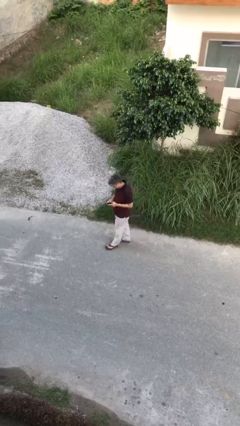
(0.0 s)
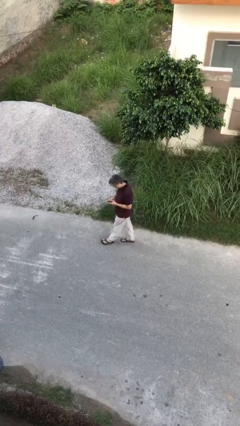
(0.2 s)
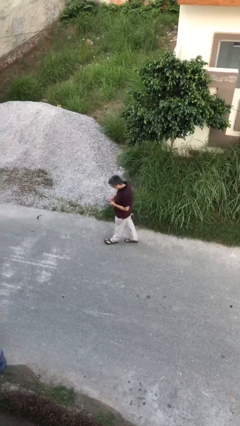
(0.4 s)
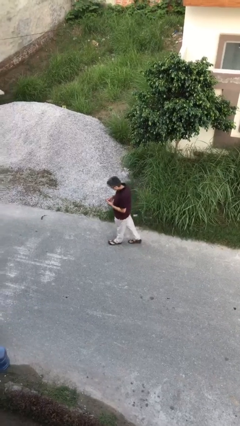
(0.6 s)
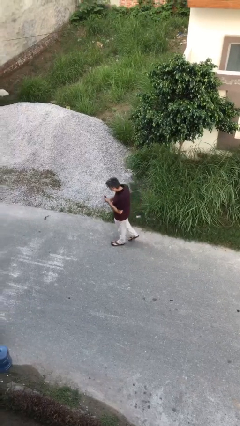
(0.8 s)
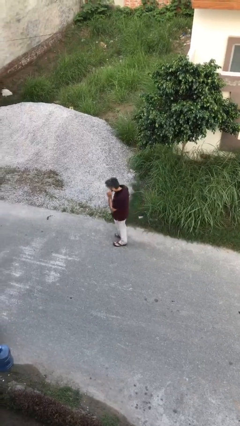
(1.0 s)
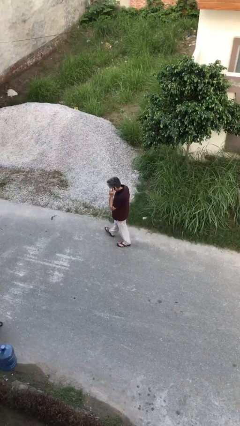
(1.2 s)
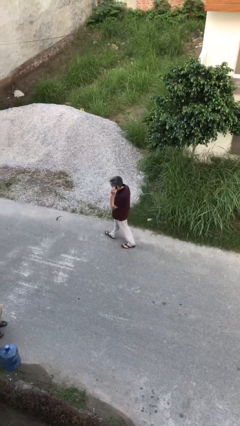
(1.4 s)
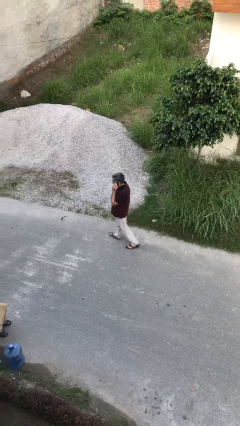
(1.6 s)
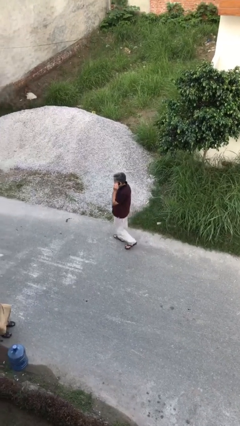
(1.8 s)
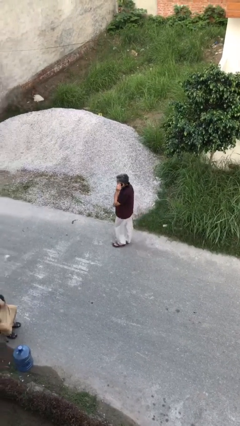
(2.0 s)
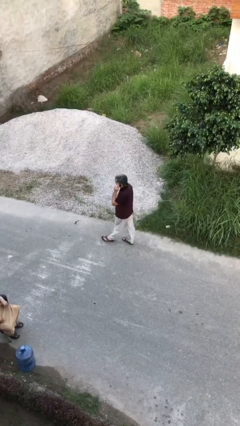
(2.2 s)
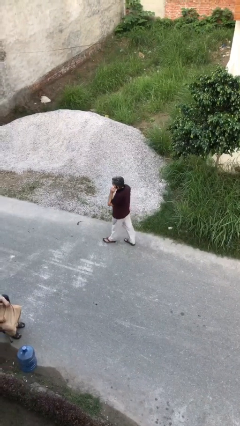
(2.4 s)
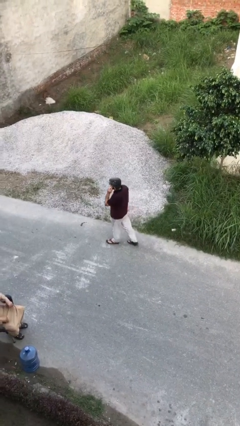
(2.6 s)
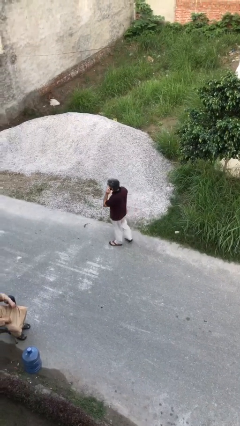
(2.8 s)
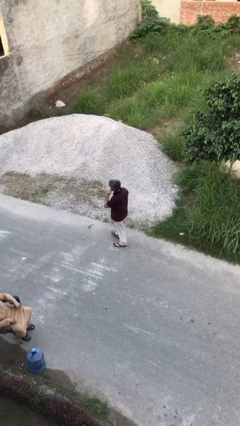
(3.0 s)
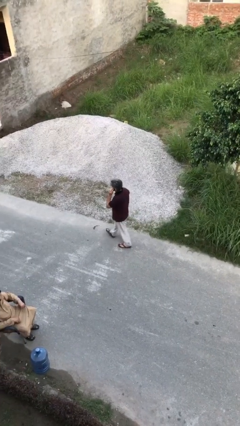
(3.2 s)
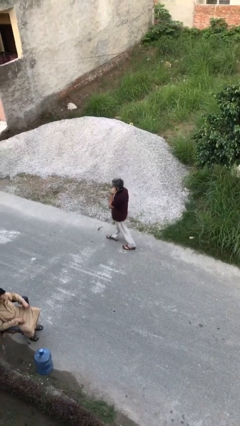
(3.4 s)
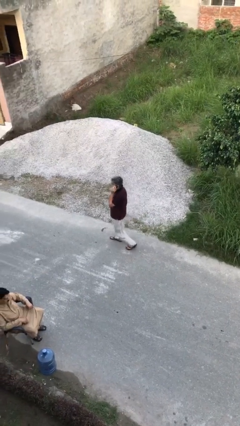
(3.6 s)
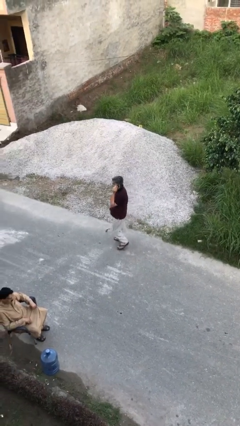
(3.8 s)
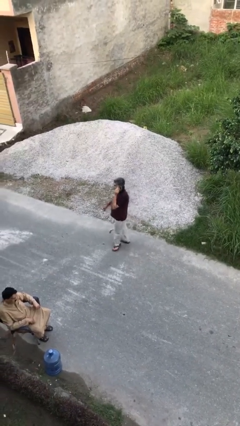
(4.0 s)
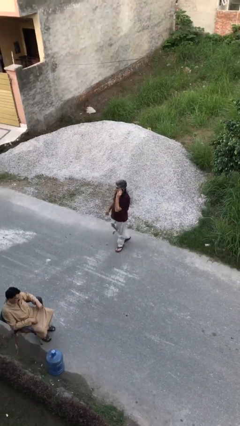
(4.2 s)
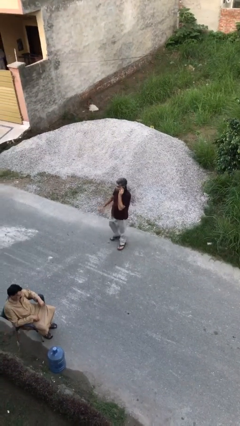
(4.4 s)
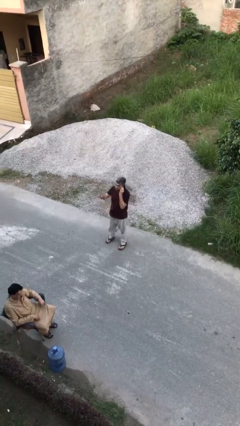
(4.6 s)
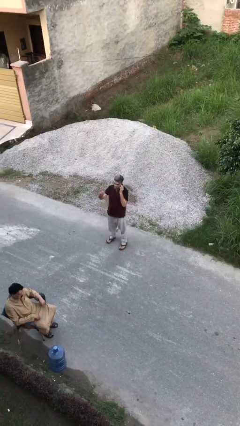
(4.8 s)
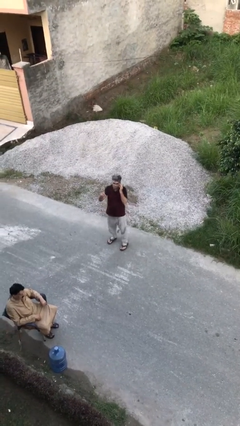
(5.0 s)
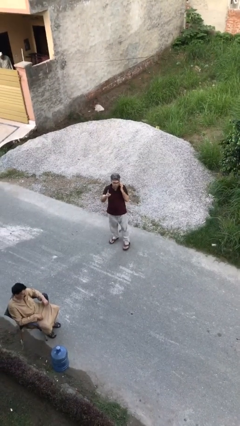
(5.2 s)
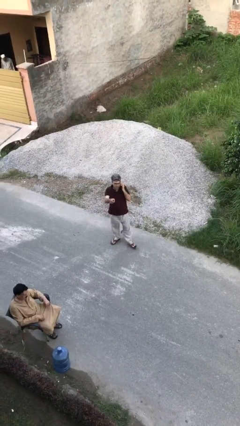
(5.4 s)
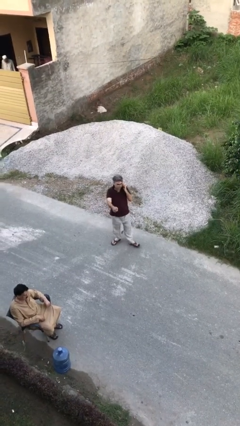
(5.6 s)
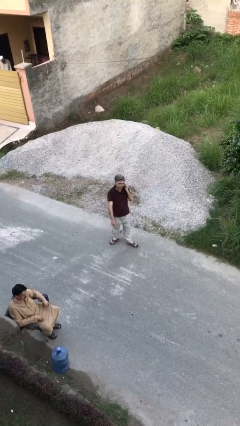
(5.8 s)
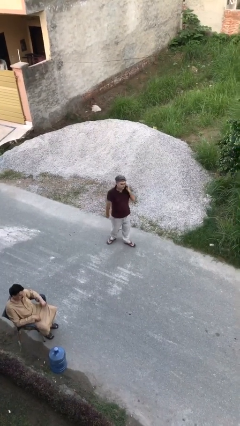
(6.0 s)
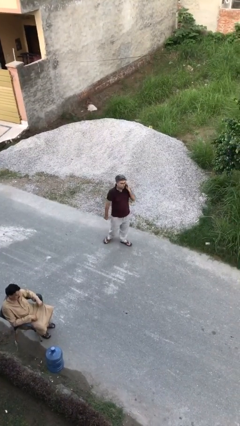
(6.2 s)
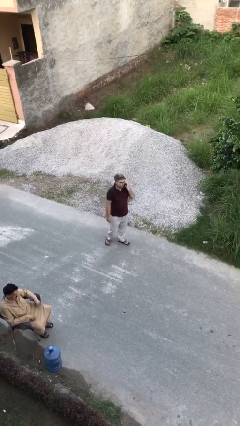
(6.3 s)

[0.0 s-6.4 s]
person talks on phone

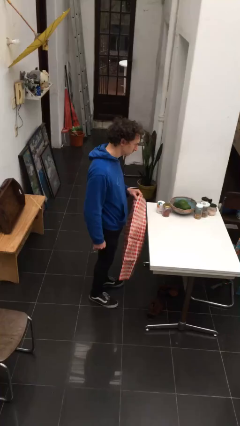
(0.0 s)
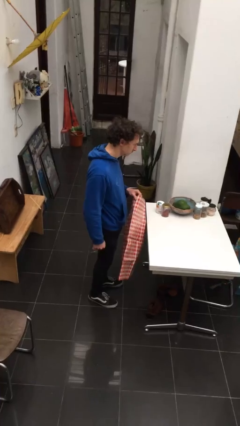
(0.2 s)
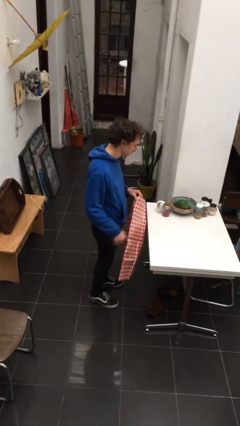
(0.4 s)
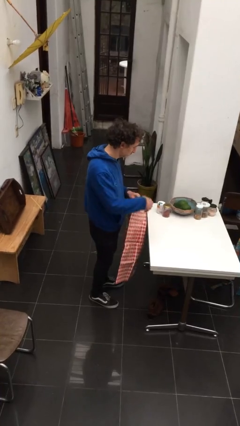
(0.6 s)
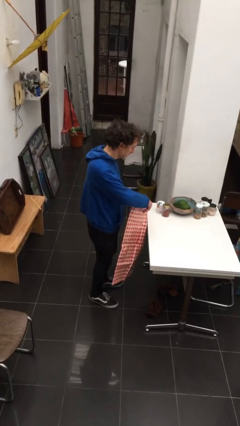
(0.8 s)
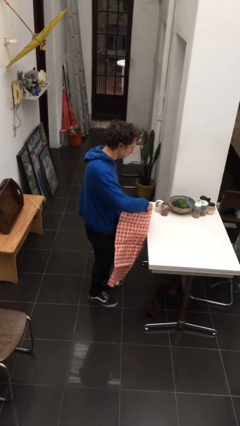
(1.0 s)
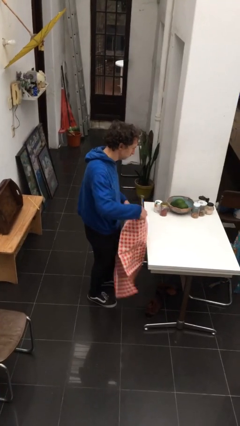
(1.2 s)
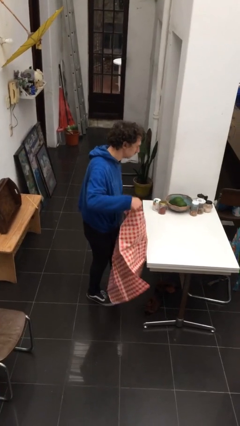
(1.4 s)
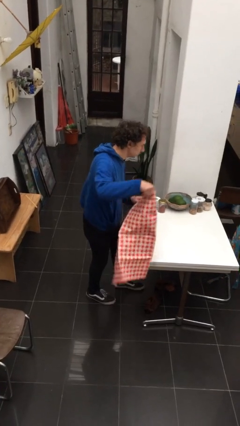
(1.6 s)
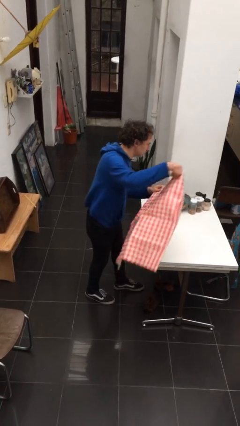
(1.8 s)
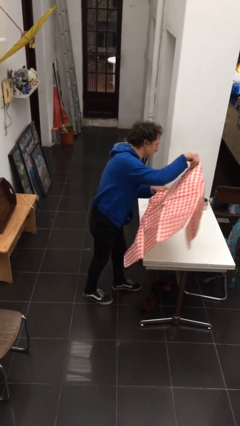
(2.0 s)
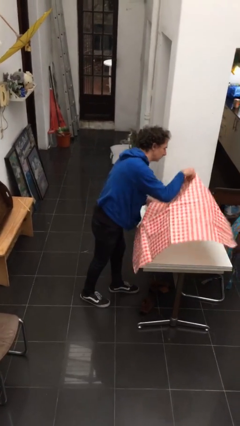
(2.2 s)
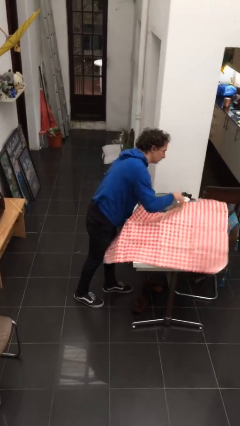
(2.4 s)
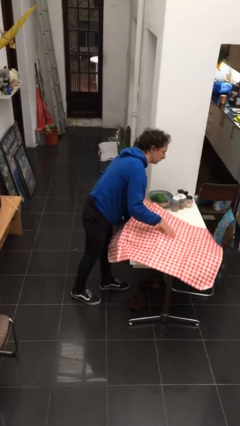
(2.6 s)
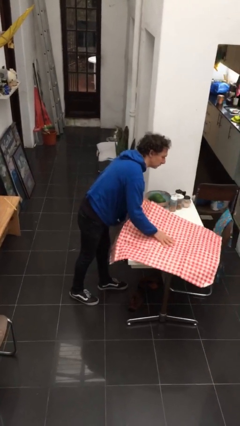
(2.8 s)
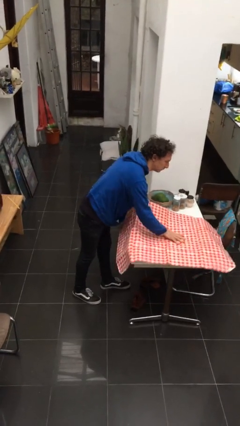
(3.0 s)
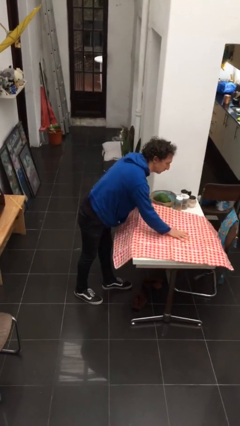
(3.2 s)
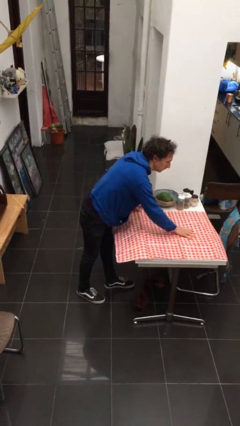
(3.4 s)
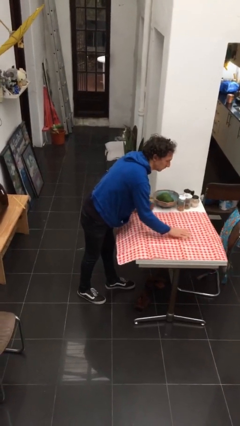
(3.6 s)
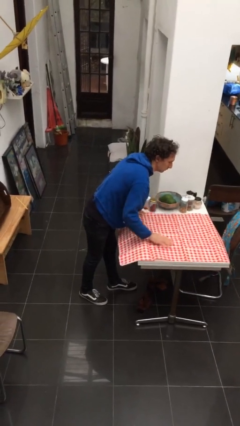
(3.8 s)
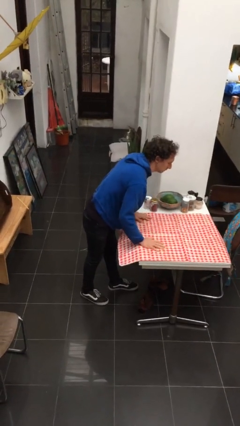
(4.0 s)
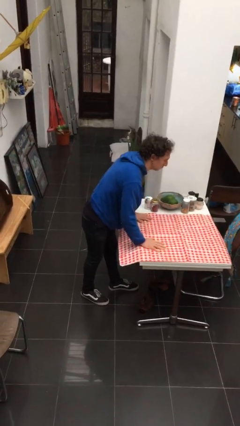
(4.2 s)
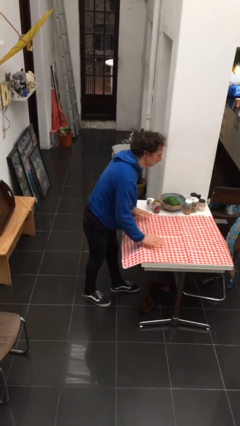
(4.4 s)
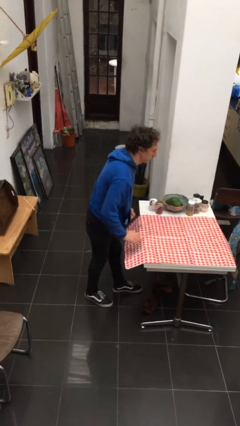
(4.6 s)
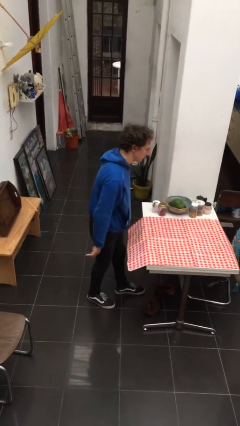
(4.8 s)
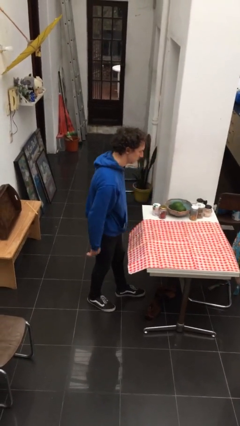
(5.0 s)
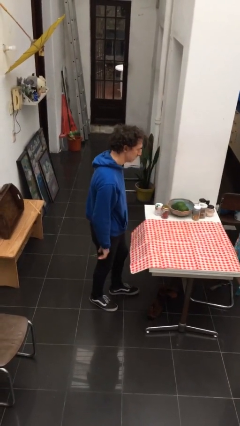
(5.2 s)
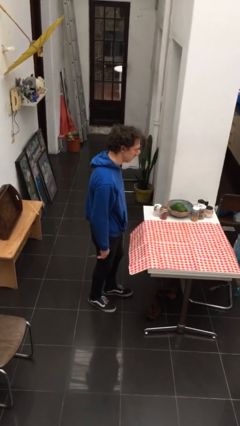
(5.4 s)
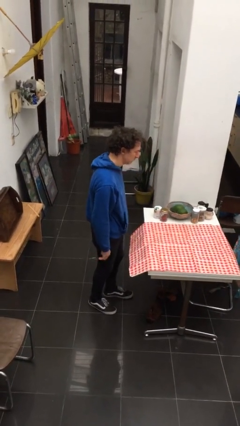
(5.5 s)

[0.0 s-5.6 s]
person spreads tablecloth

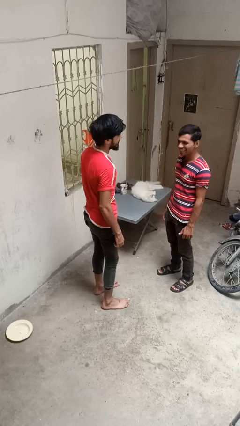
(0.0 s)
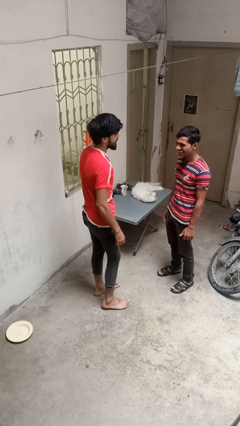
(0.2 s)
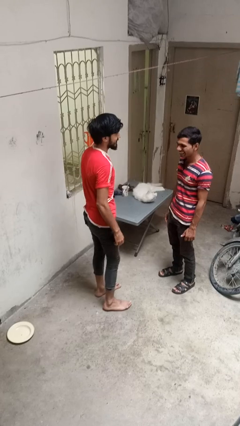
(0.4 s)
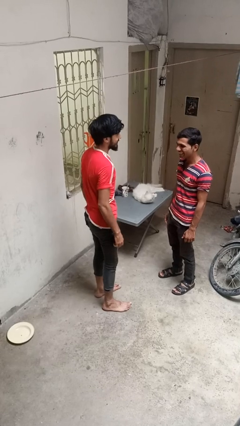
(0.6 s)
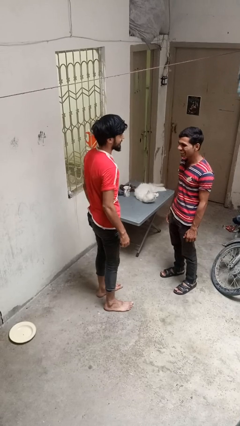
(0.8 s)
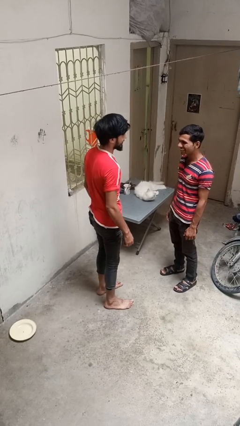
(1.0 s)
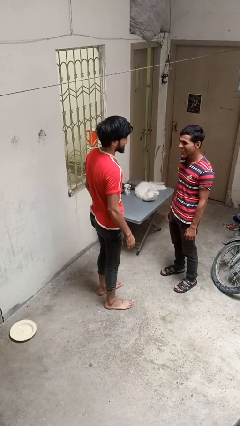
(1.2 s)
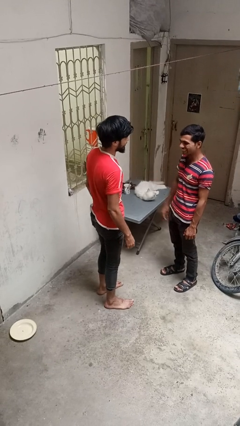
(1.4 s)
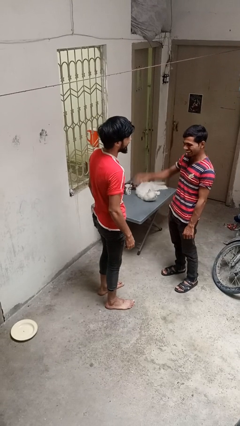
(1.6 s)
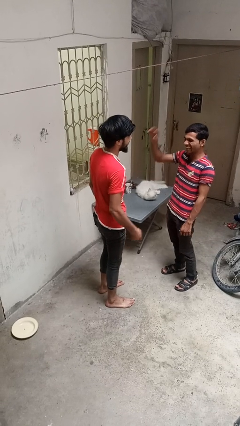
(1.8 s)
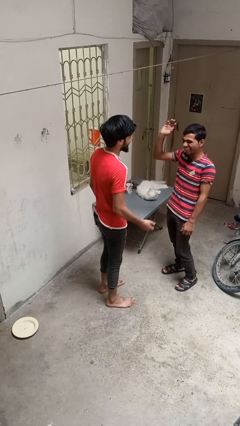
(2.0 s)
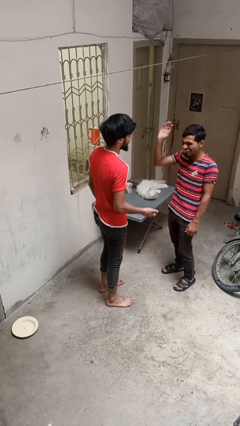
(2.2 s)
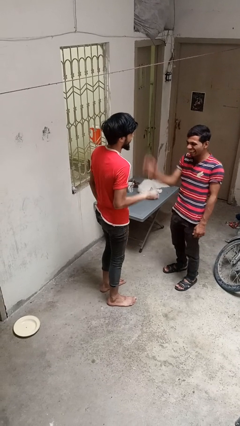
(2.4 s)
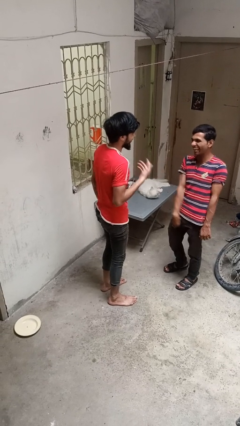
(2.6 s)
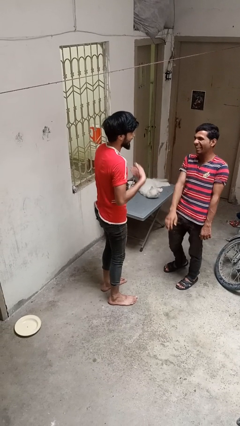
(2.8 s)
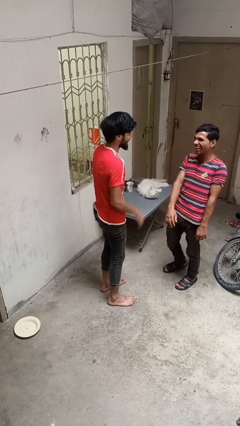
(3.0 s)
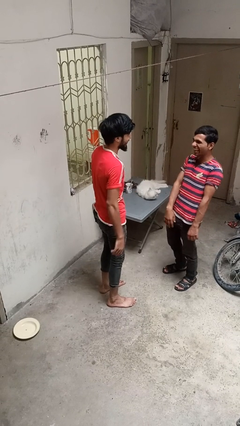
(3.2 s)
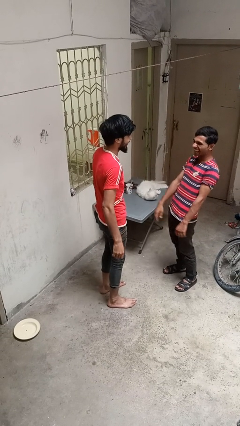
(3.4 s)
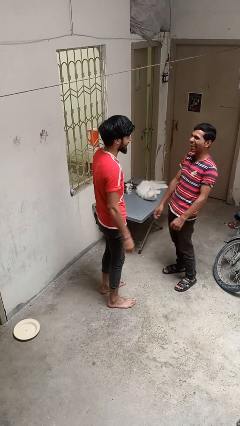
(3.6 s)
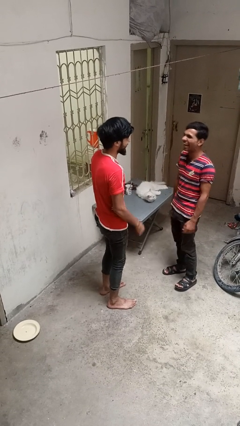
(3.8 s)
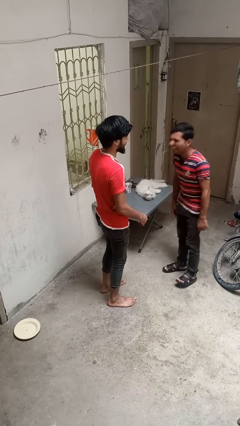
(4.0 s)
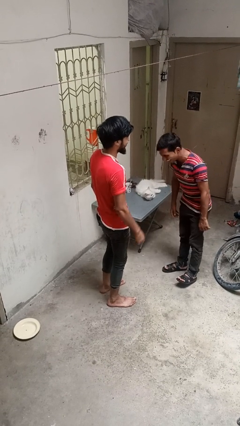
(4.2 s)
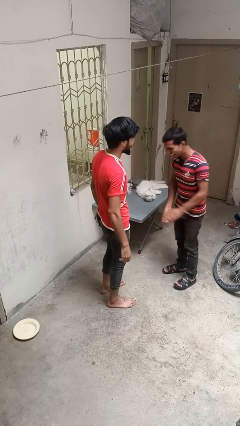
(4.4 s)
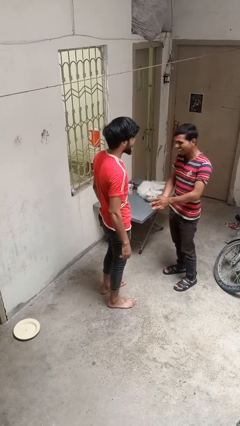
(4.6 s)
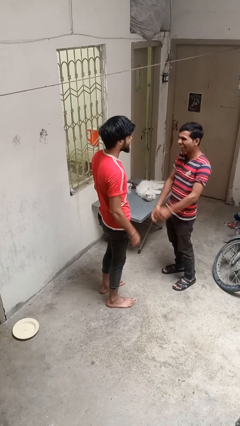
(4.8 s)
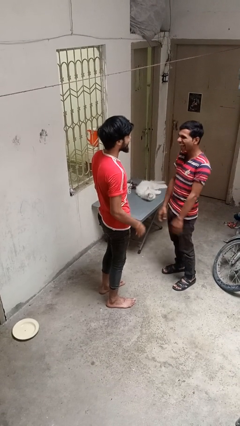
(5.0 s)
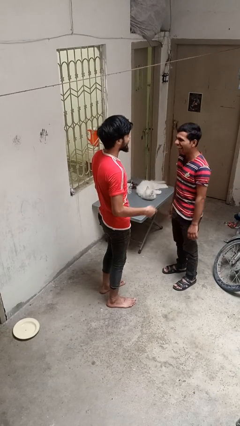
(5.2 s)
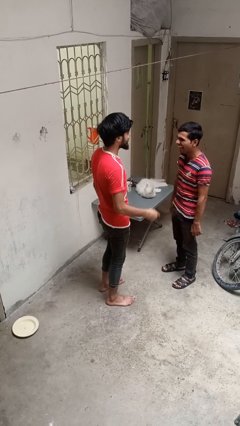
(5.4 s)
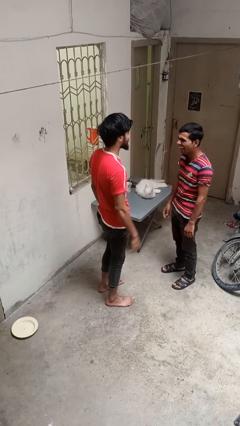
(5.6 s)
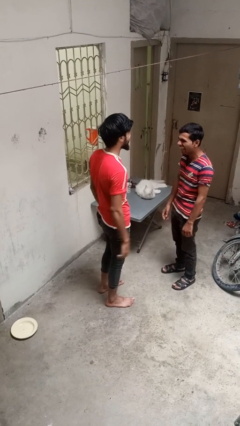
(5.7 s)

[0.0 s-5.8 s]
person laughs with person
